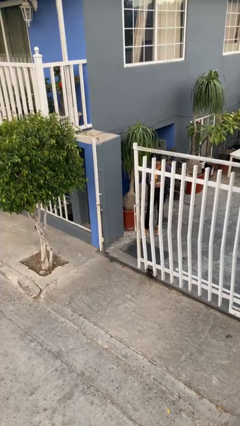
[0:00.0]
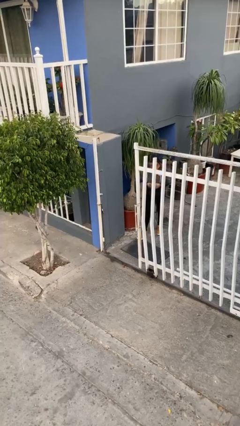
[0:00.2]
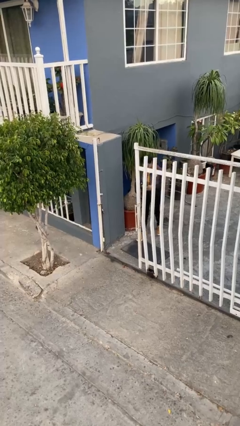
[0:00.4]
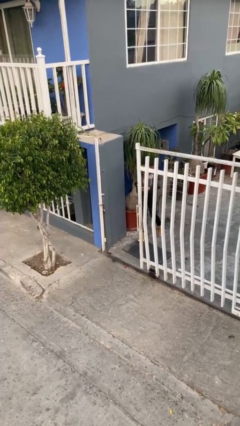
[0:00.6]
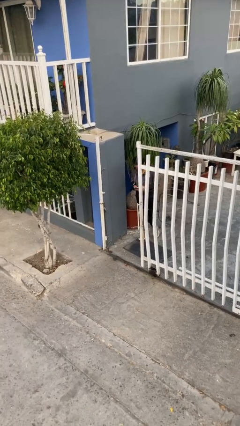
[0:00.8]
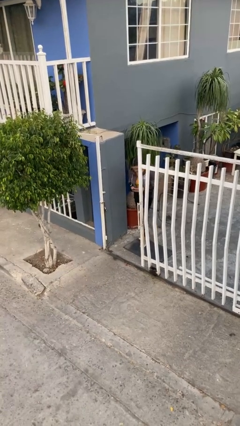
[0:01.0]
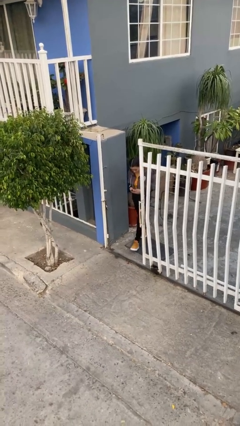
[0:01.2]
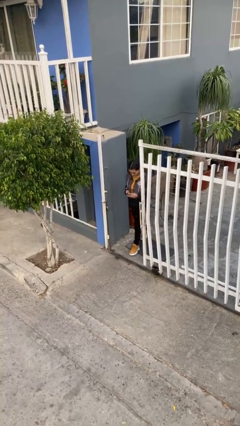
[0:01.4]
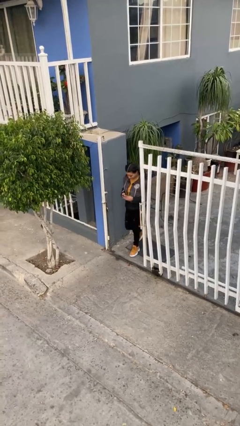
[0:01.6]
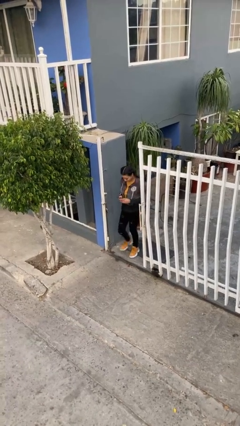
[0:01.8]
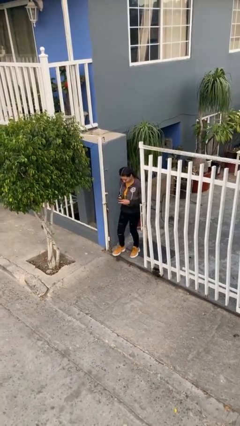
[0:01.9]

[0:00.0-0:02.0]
person enters scene through structure

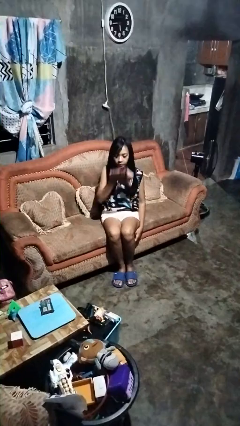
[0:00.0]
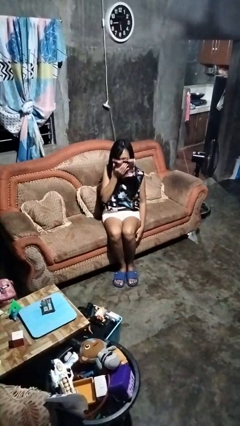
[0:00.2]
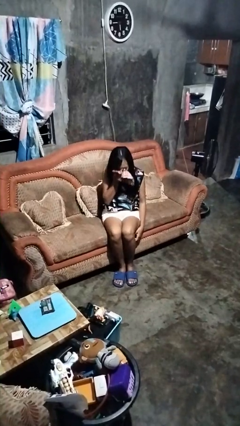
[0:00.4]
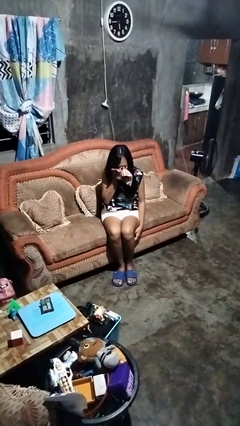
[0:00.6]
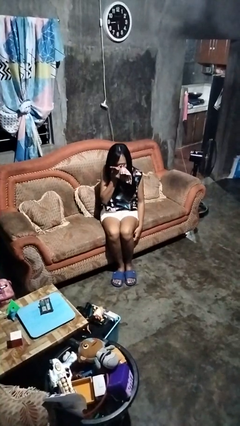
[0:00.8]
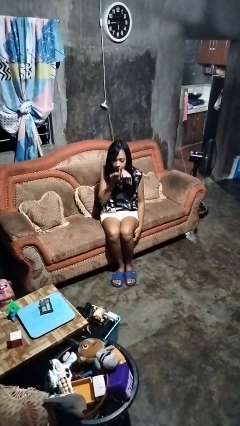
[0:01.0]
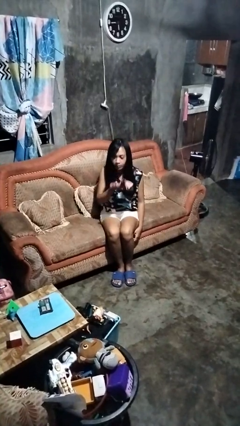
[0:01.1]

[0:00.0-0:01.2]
person blows nose

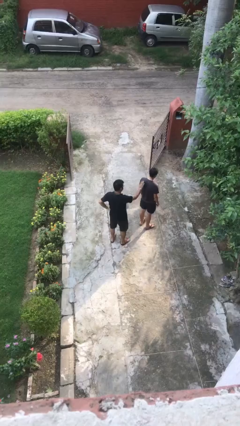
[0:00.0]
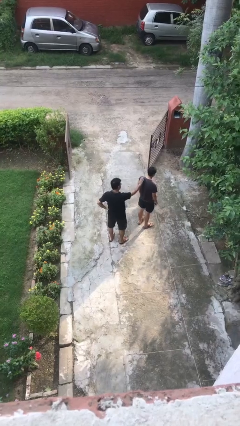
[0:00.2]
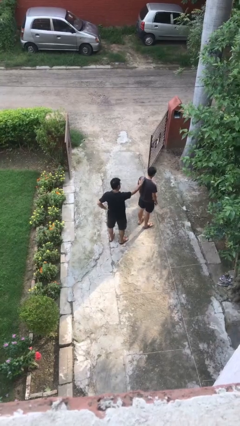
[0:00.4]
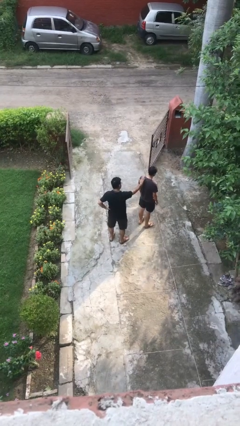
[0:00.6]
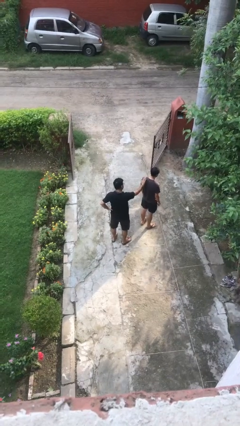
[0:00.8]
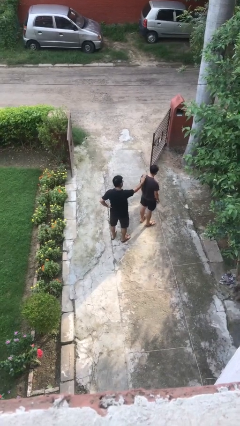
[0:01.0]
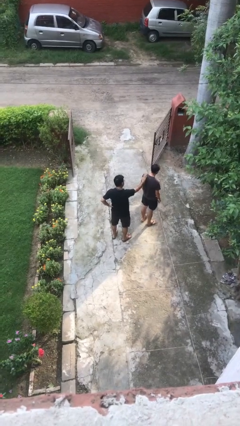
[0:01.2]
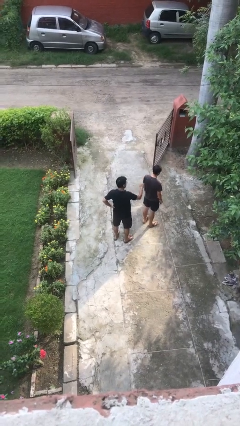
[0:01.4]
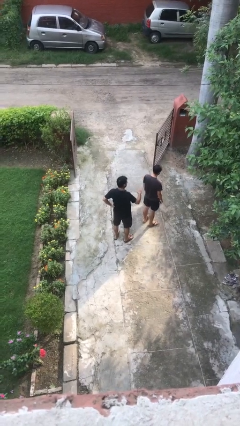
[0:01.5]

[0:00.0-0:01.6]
person touches back of person

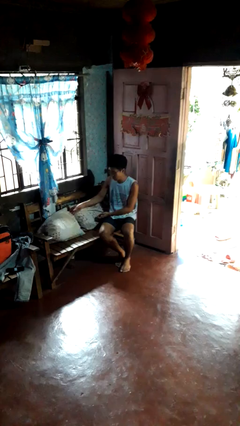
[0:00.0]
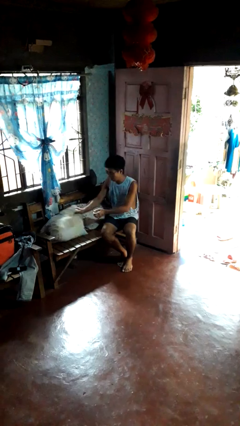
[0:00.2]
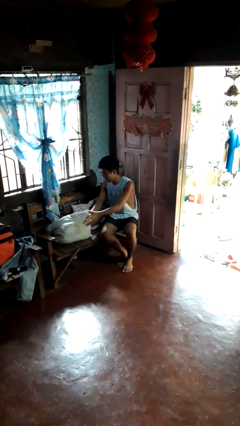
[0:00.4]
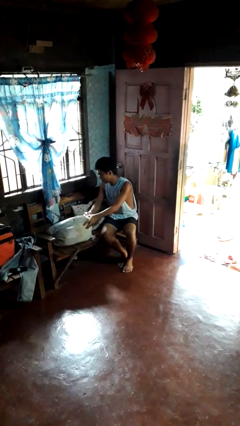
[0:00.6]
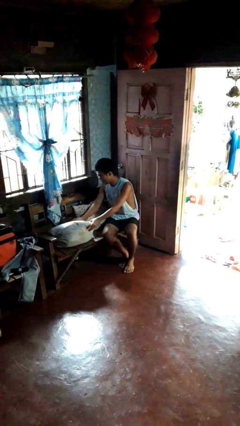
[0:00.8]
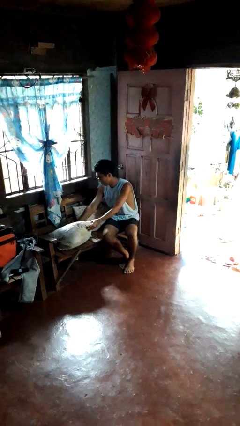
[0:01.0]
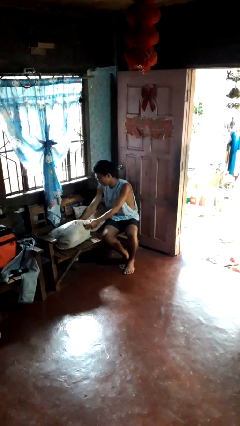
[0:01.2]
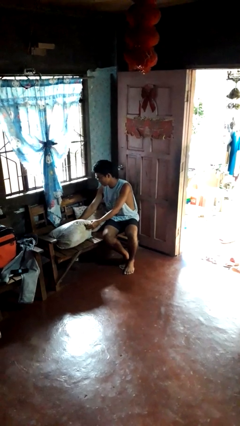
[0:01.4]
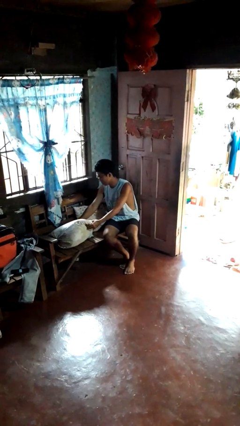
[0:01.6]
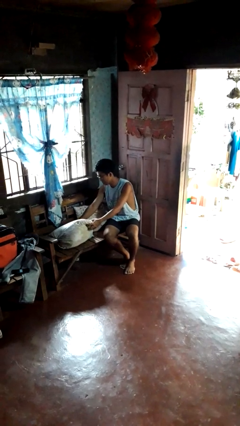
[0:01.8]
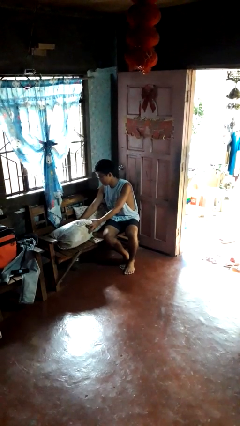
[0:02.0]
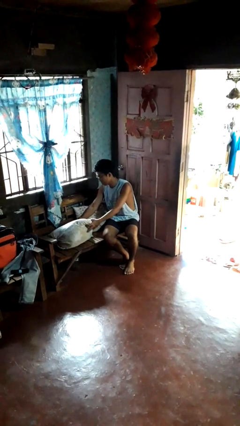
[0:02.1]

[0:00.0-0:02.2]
person searches in couch

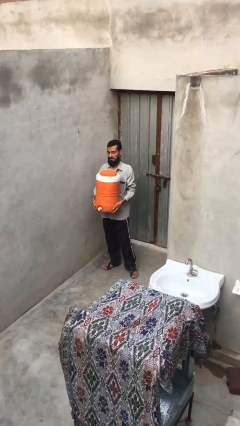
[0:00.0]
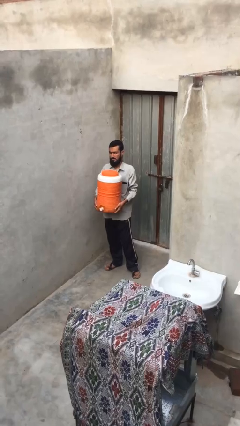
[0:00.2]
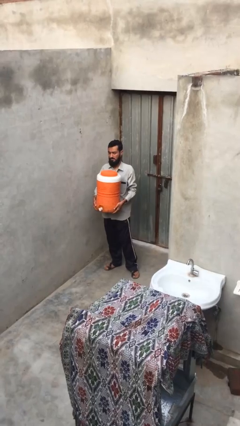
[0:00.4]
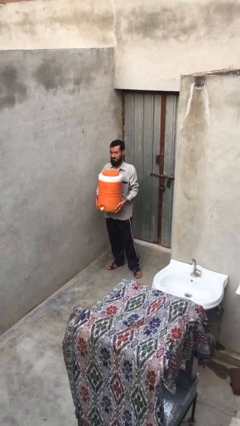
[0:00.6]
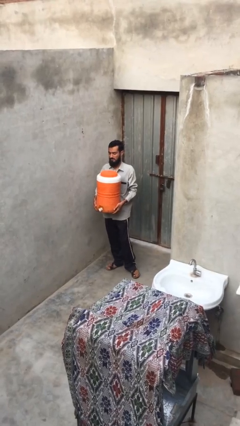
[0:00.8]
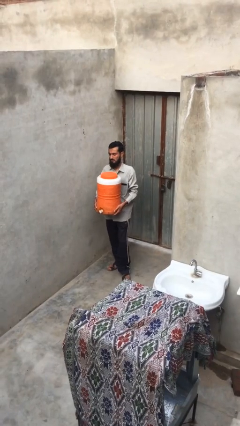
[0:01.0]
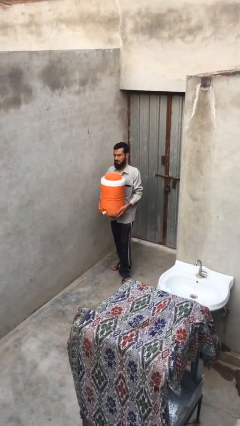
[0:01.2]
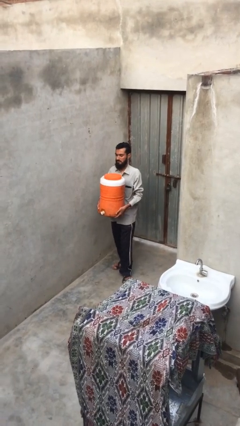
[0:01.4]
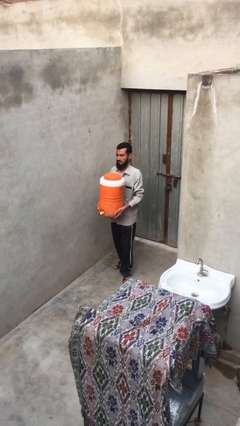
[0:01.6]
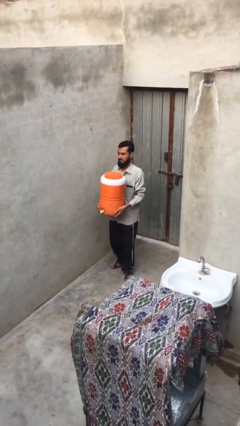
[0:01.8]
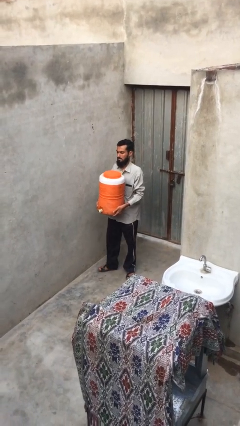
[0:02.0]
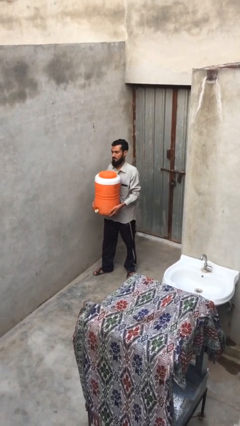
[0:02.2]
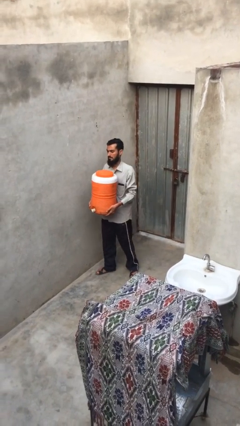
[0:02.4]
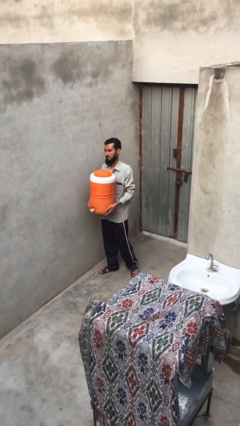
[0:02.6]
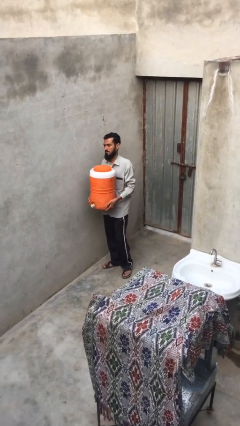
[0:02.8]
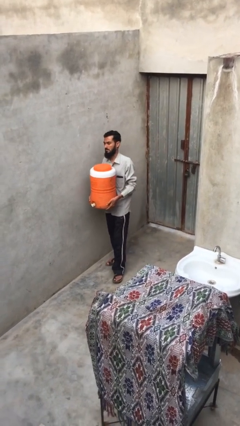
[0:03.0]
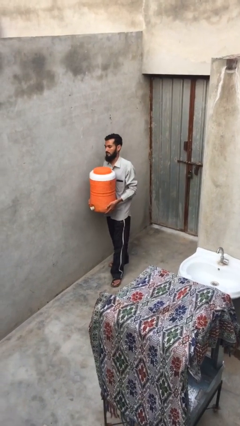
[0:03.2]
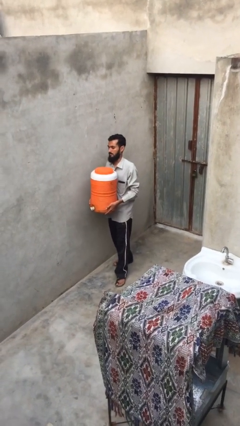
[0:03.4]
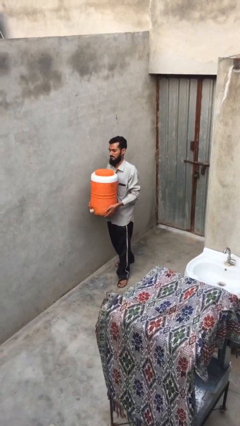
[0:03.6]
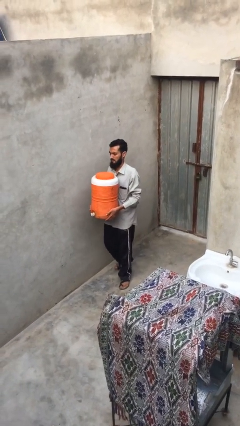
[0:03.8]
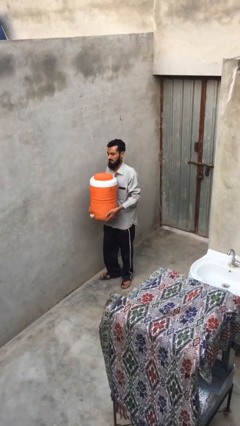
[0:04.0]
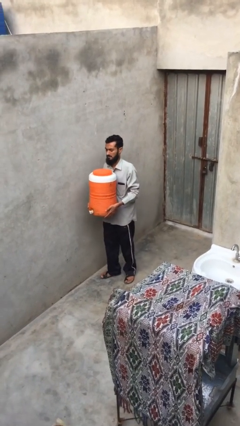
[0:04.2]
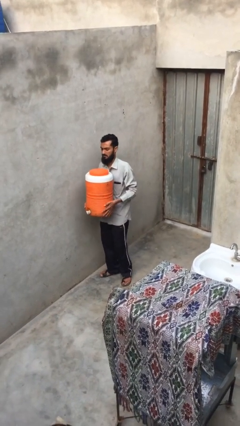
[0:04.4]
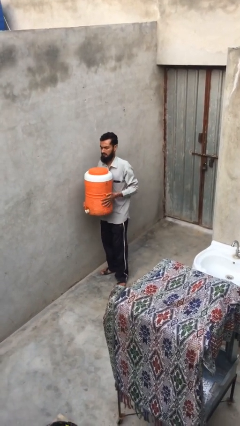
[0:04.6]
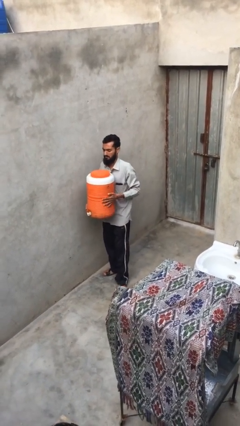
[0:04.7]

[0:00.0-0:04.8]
person carries heavy object

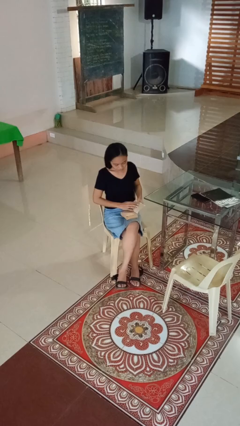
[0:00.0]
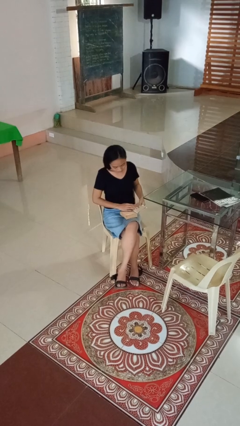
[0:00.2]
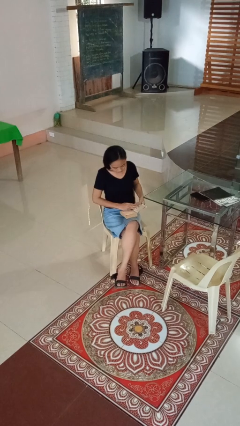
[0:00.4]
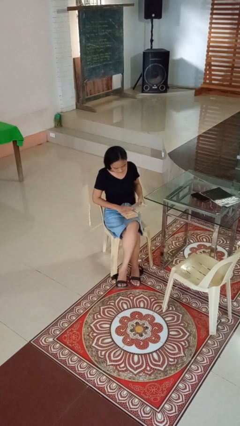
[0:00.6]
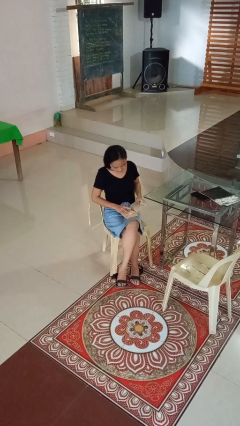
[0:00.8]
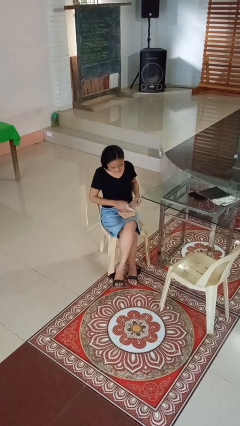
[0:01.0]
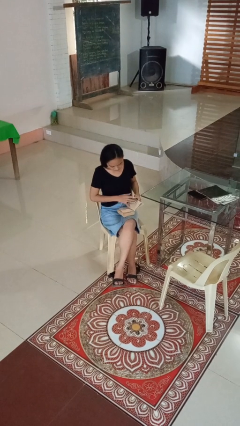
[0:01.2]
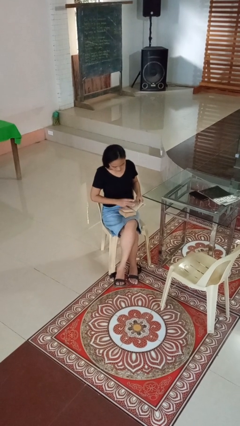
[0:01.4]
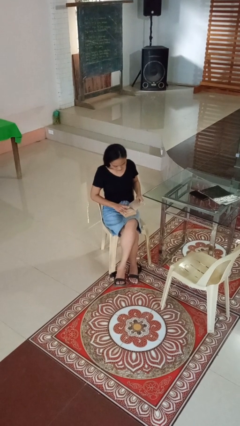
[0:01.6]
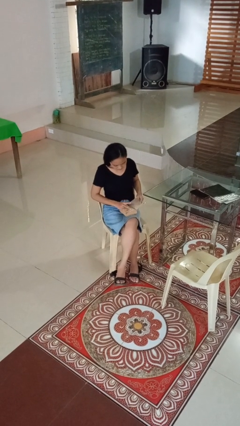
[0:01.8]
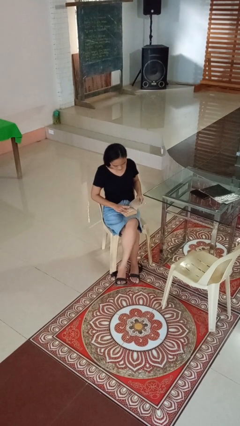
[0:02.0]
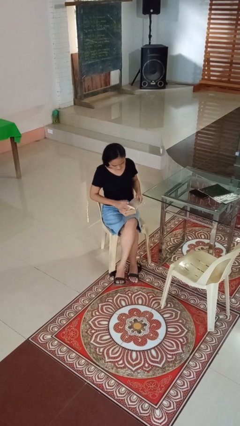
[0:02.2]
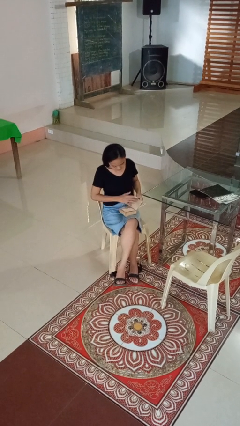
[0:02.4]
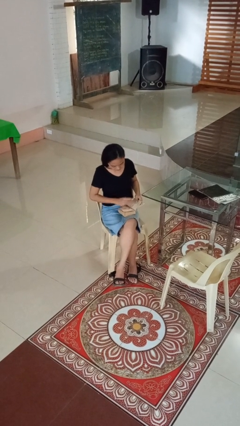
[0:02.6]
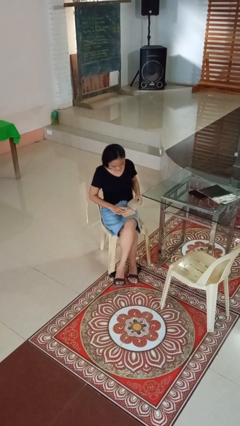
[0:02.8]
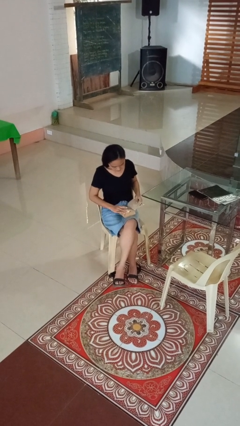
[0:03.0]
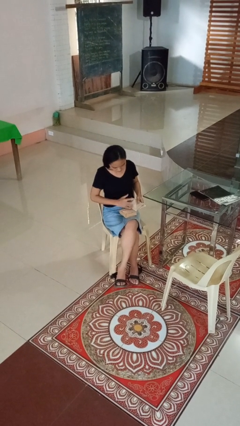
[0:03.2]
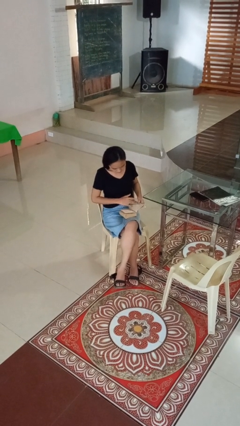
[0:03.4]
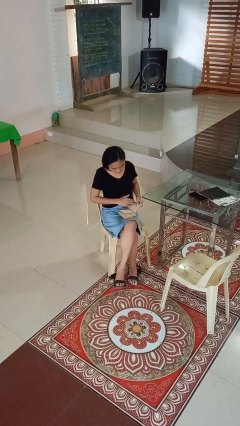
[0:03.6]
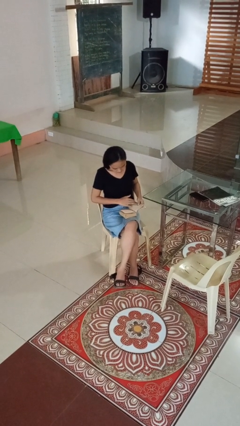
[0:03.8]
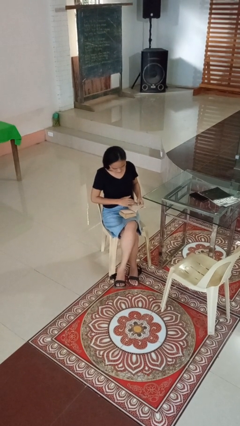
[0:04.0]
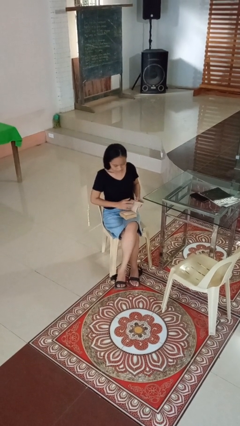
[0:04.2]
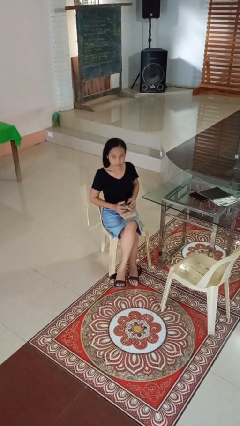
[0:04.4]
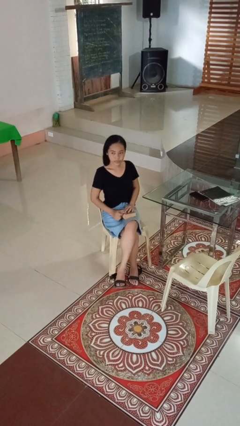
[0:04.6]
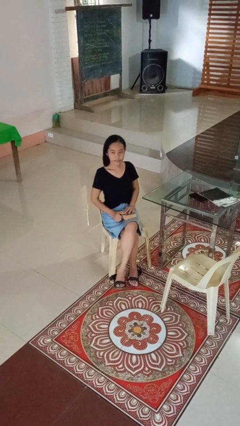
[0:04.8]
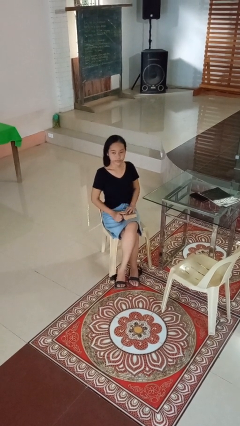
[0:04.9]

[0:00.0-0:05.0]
person reads book

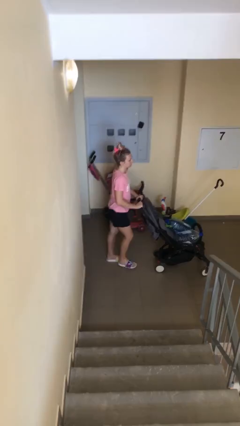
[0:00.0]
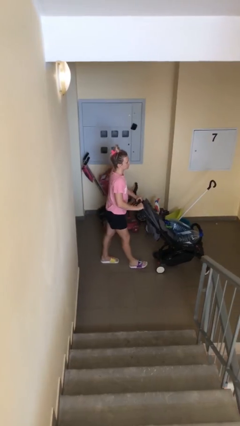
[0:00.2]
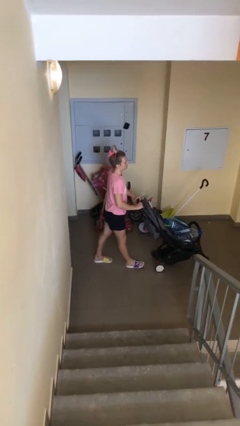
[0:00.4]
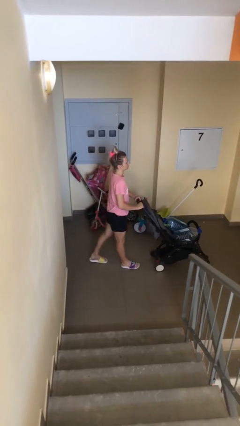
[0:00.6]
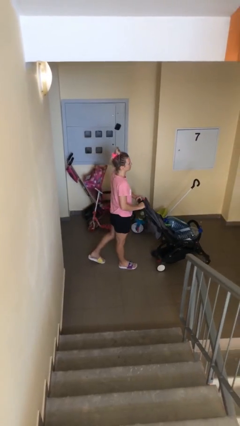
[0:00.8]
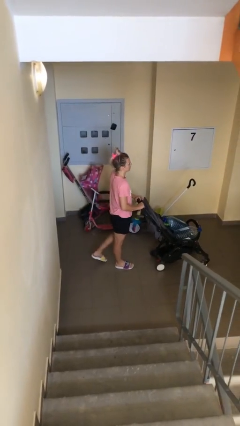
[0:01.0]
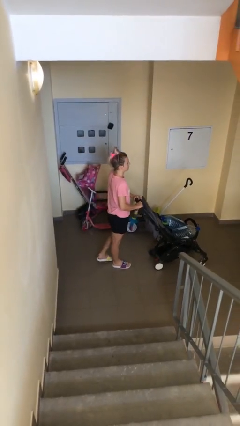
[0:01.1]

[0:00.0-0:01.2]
person pushes wheeled cart
